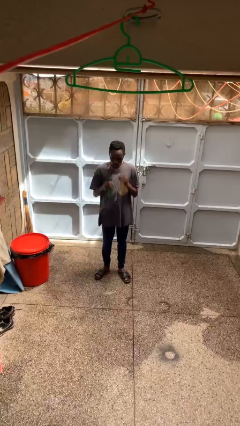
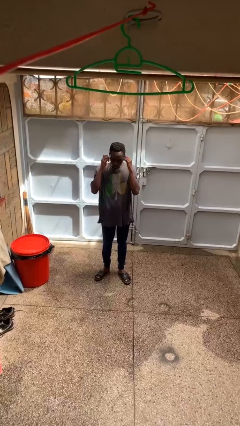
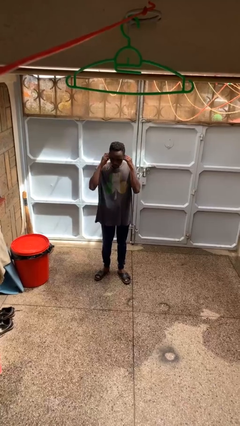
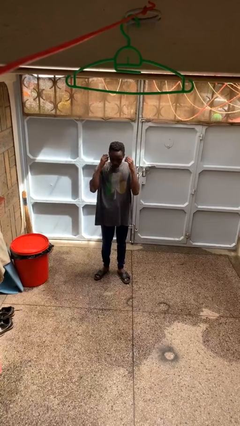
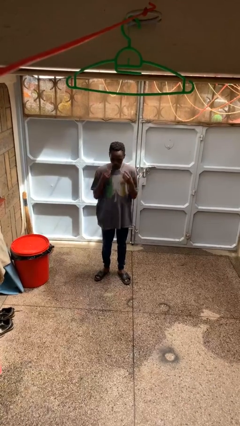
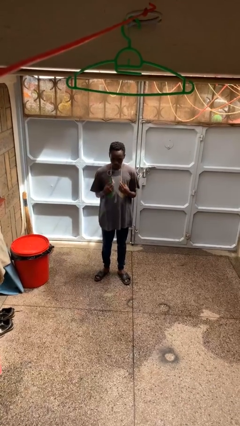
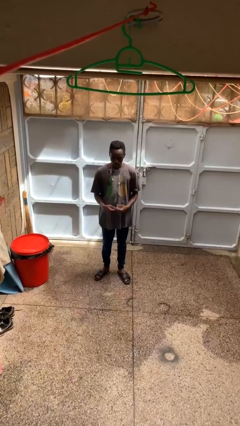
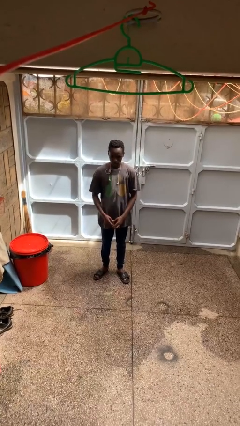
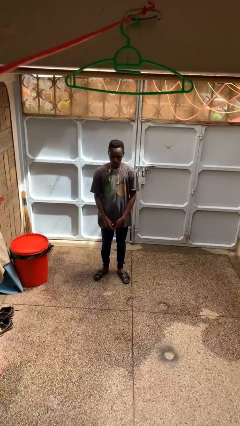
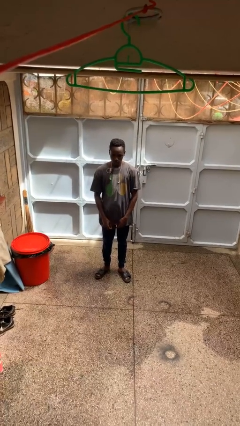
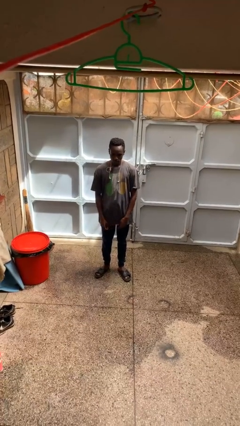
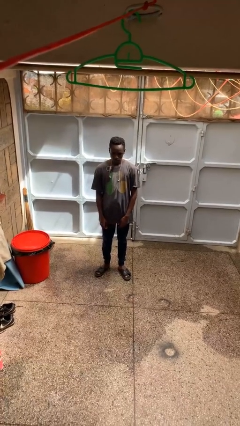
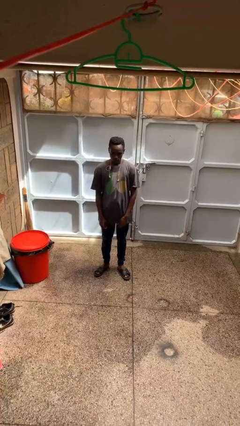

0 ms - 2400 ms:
person takes off headphones

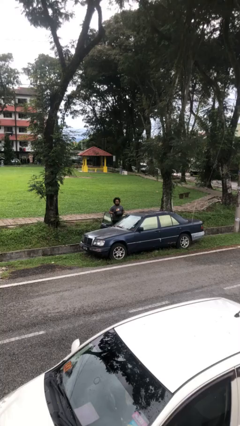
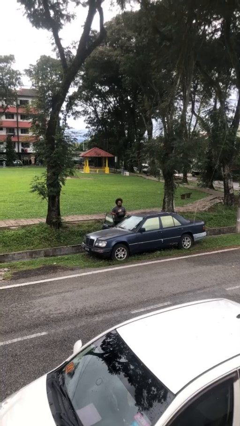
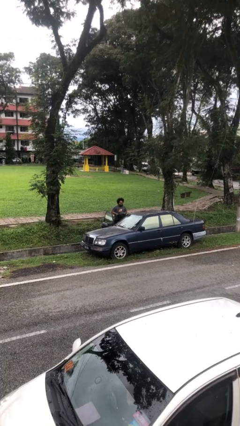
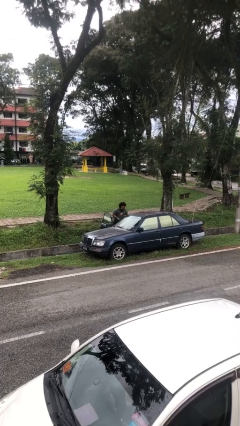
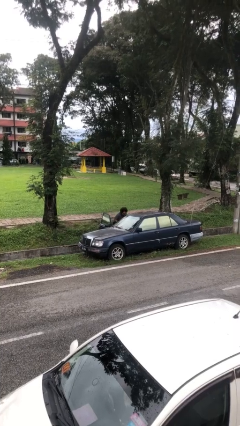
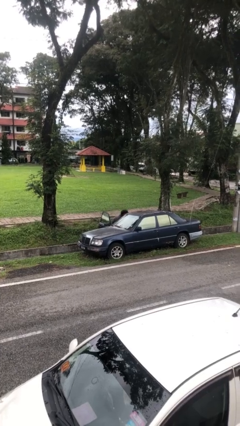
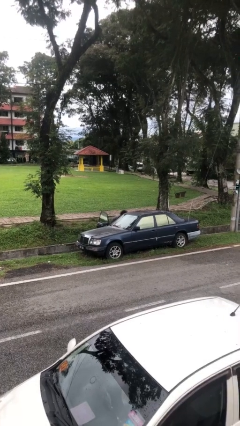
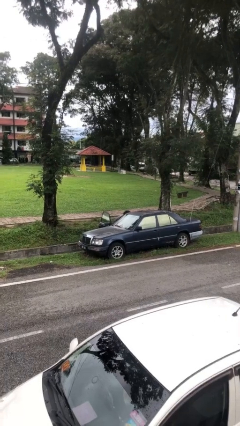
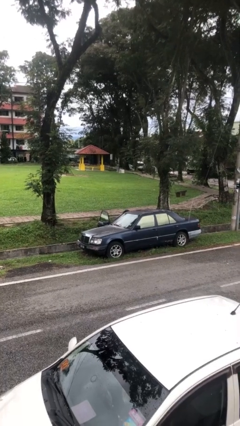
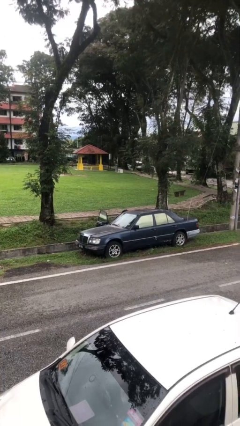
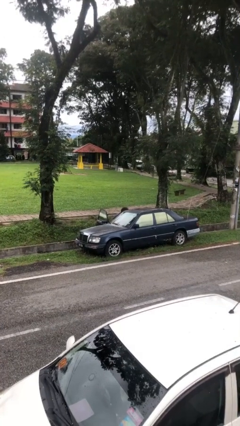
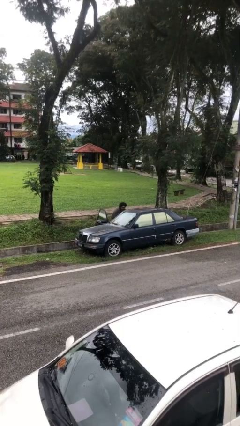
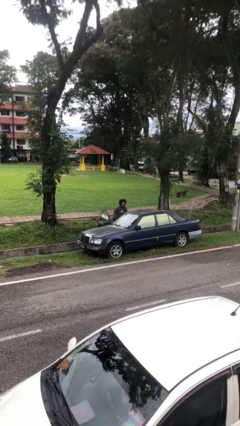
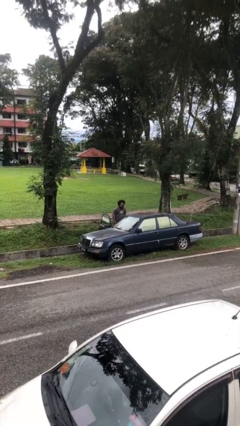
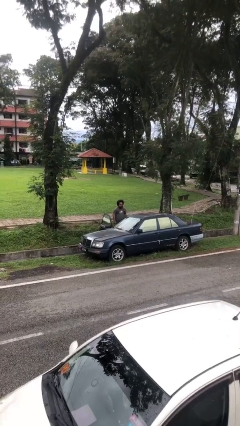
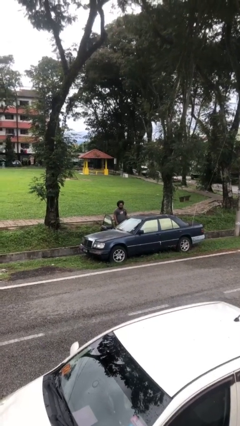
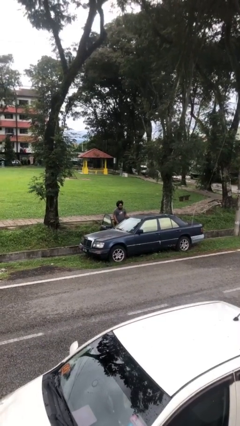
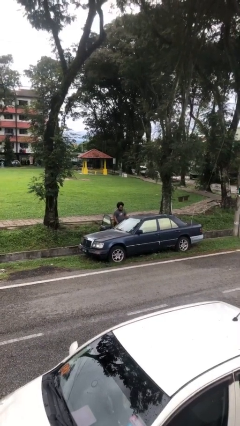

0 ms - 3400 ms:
person loads car

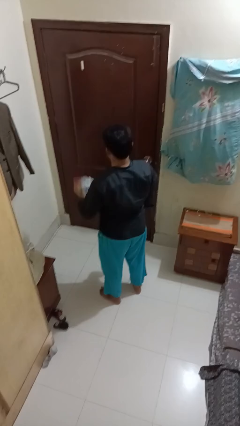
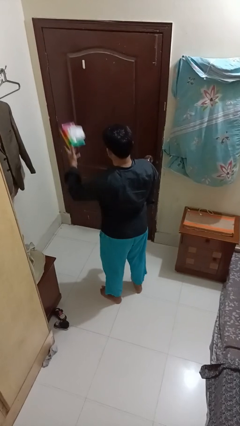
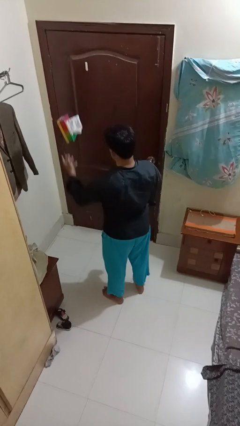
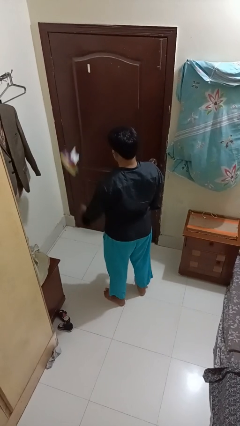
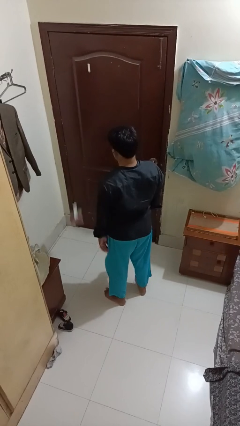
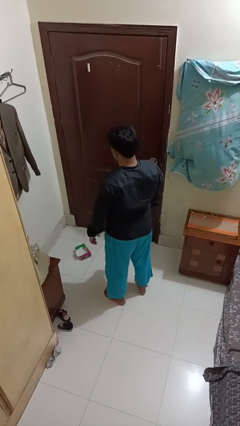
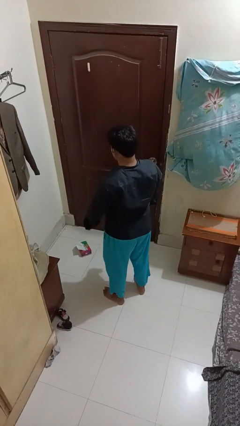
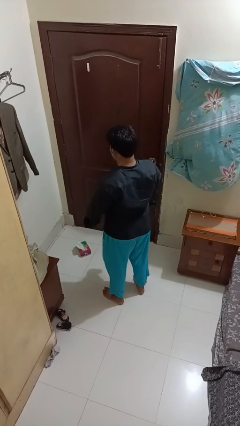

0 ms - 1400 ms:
person throws object into air

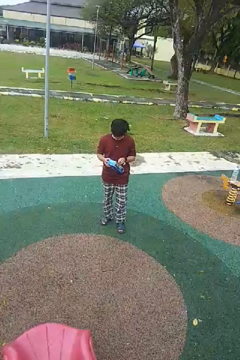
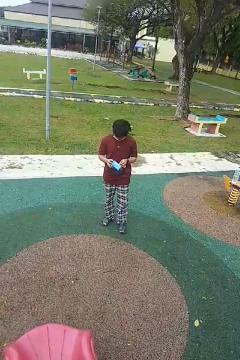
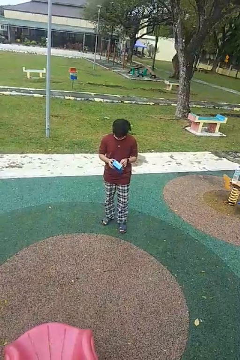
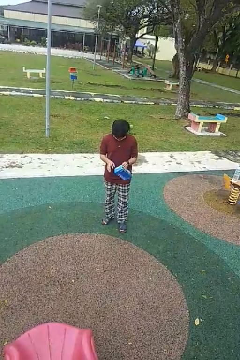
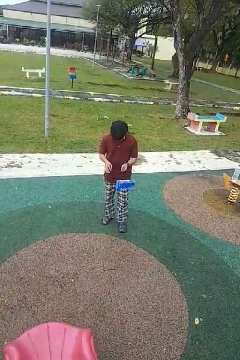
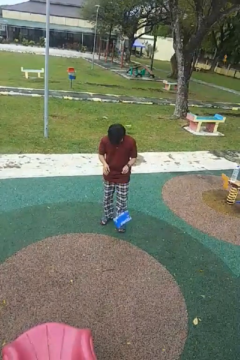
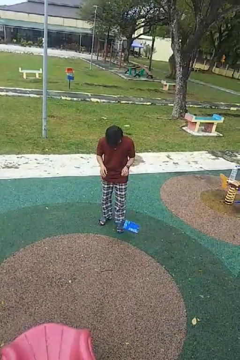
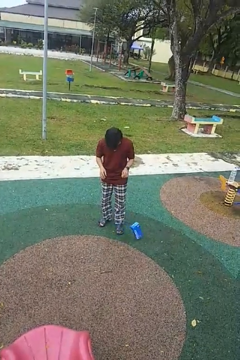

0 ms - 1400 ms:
person drops object

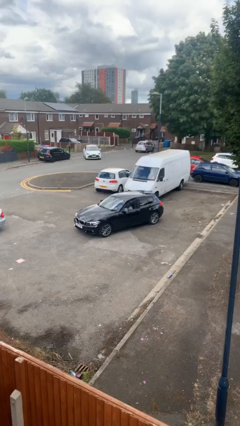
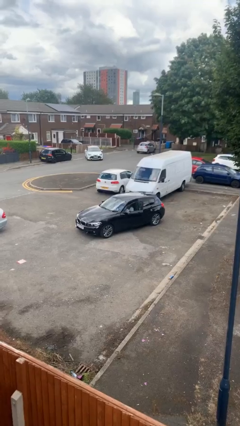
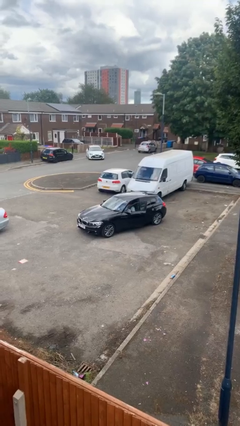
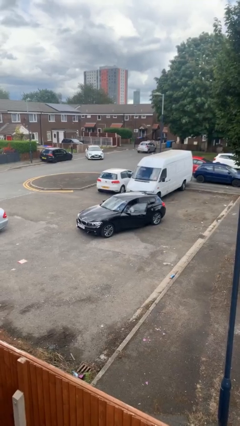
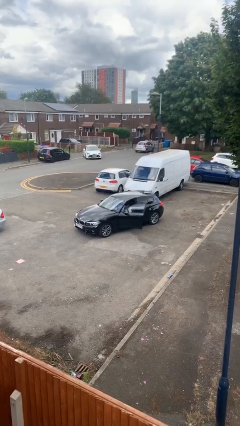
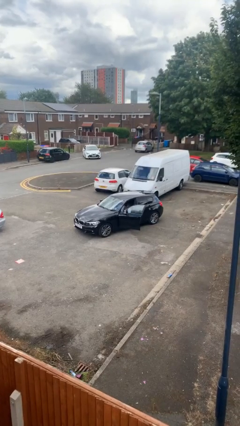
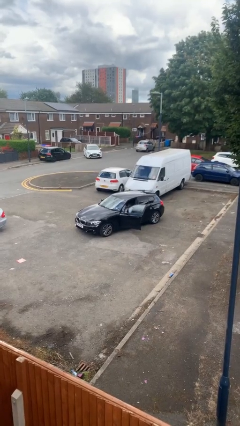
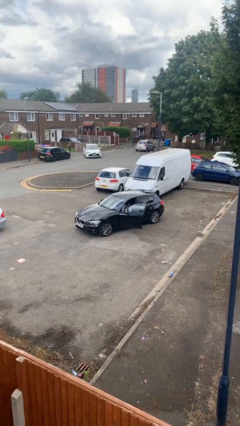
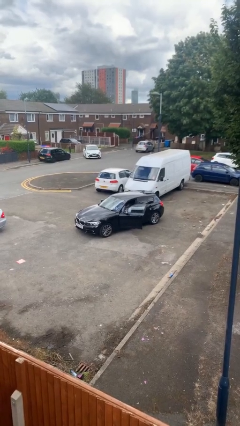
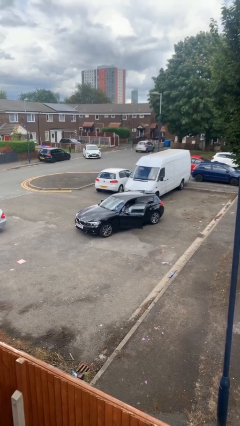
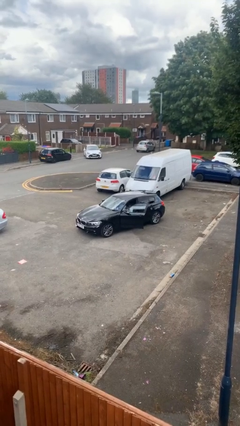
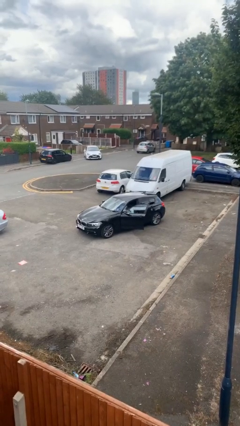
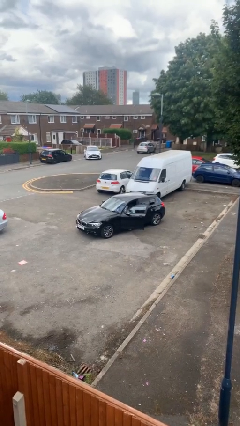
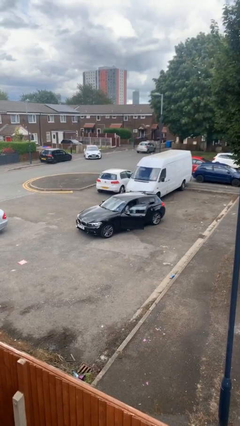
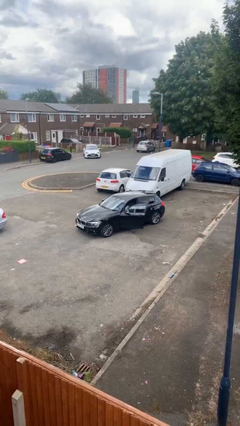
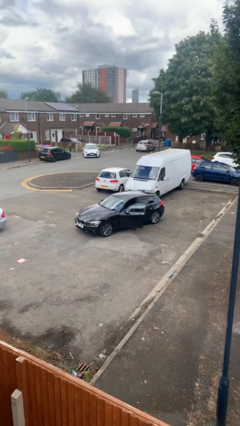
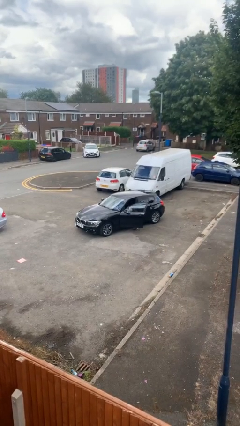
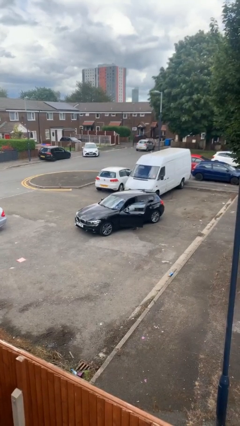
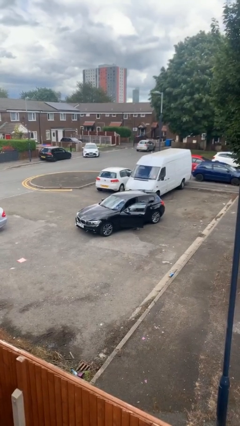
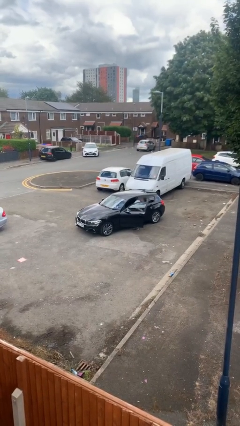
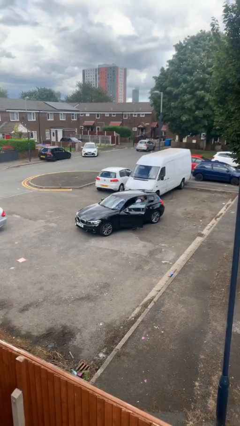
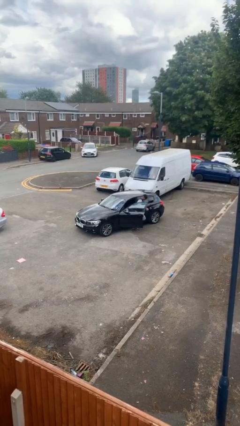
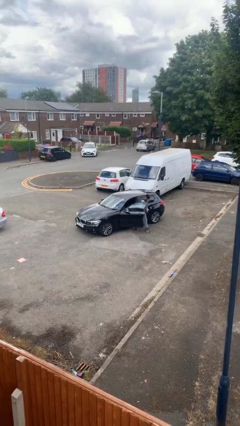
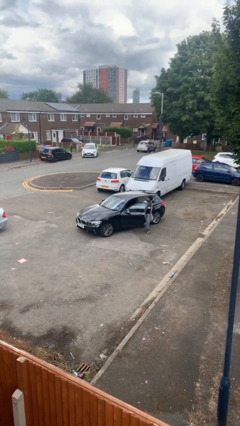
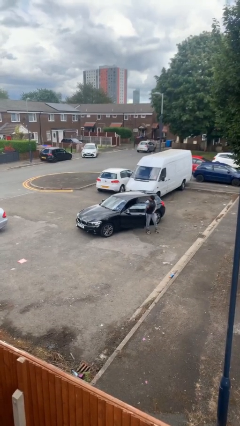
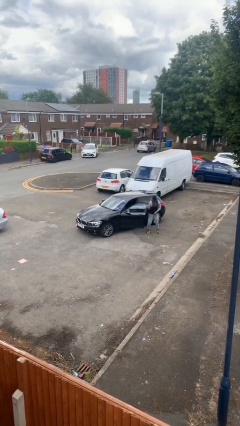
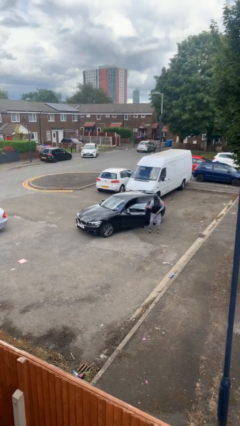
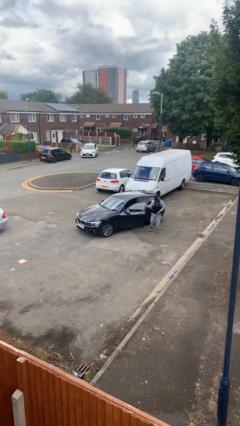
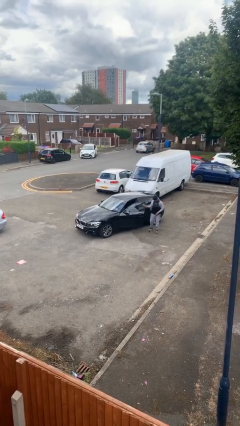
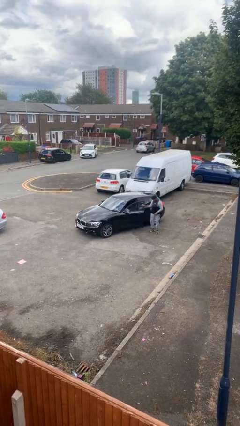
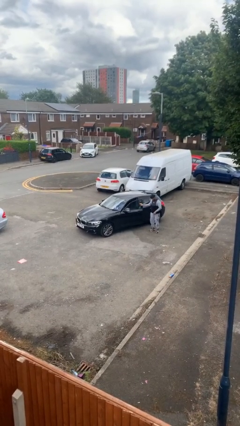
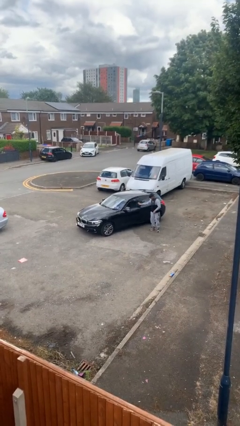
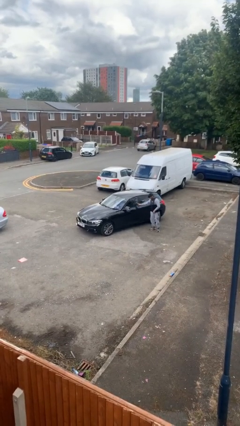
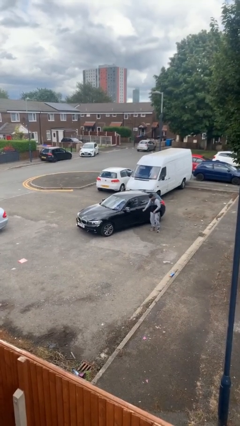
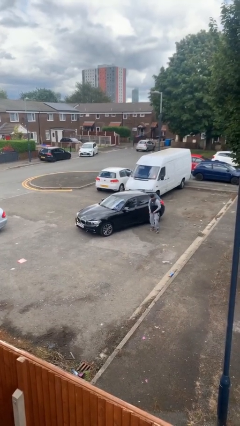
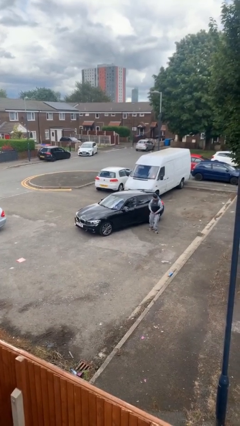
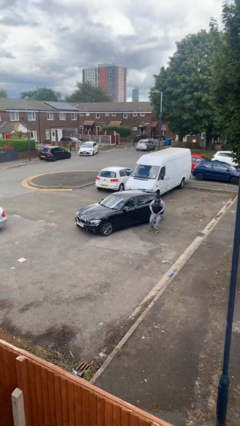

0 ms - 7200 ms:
car drops off person

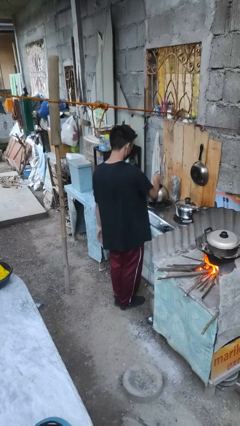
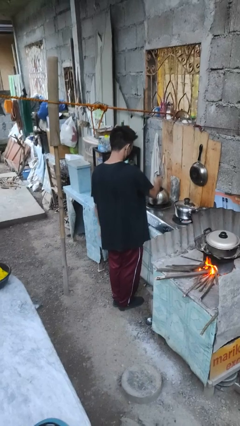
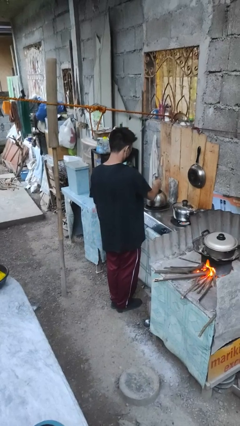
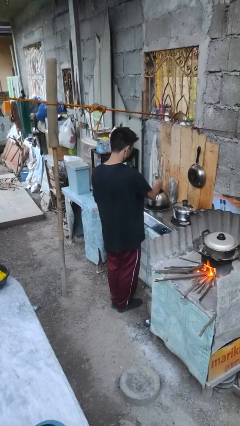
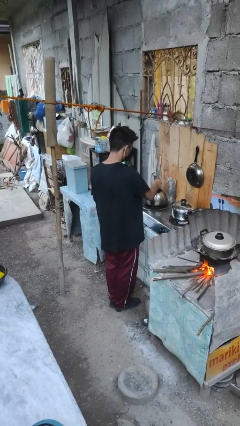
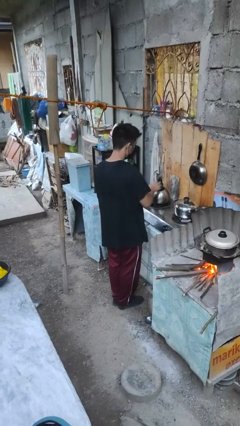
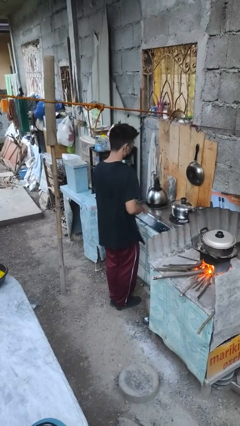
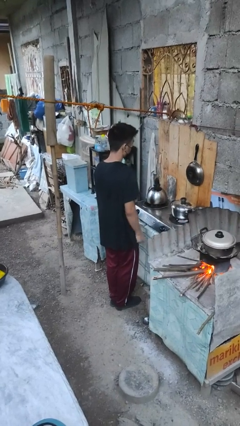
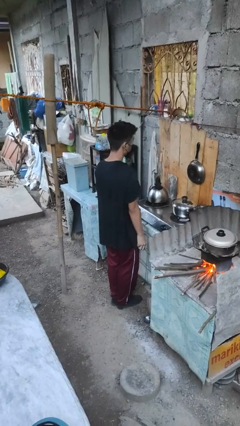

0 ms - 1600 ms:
person puts down object on countertop
